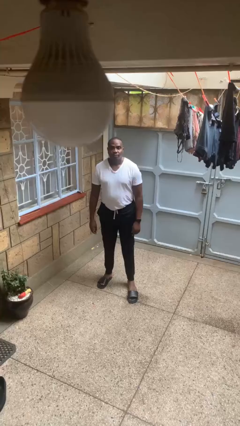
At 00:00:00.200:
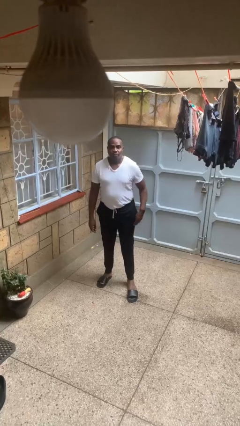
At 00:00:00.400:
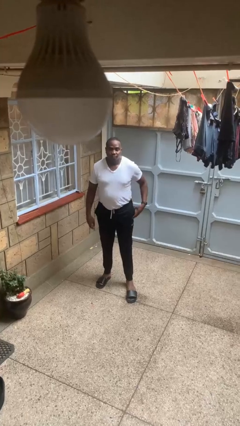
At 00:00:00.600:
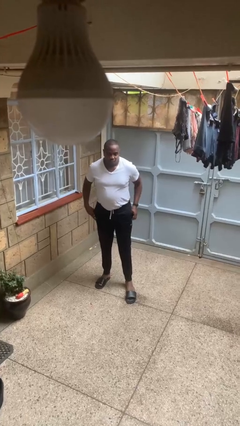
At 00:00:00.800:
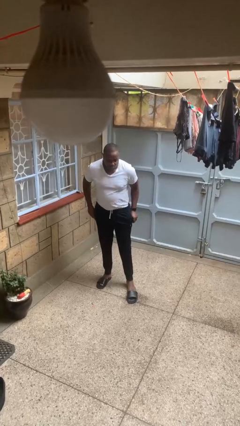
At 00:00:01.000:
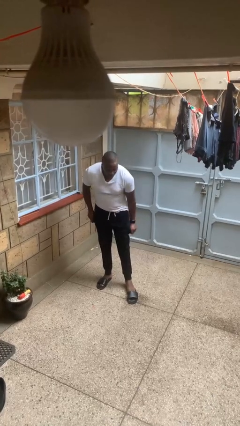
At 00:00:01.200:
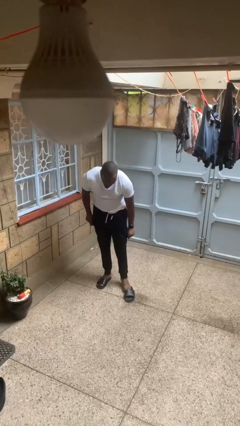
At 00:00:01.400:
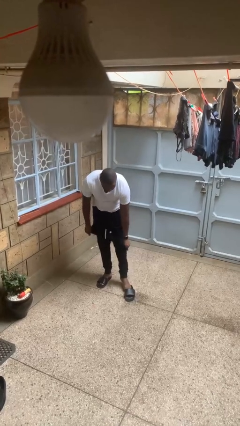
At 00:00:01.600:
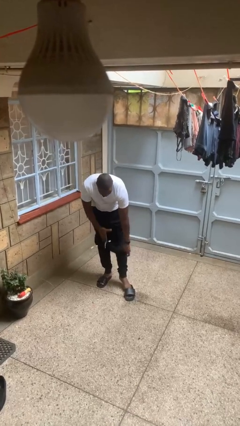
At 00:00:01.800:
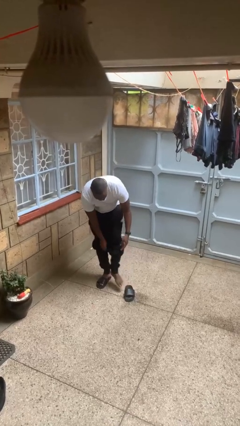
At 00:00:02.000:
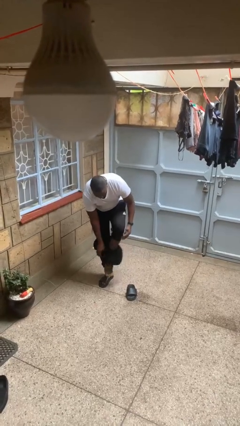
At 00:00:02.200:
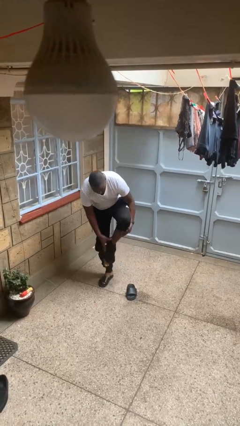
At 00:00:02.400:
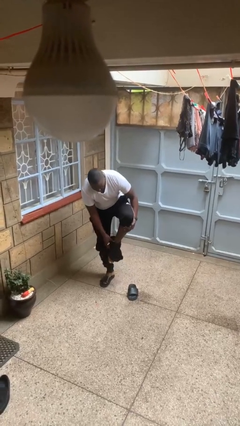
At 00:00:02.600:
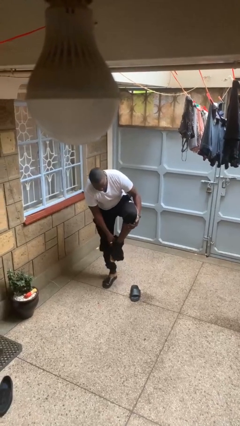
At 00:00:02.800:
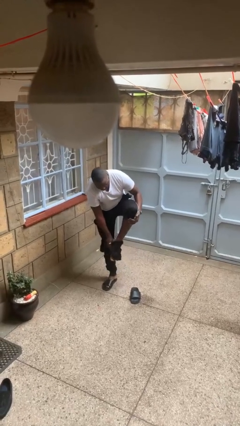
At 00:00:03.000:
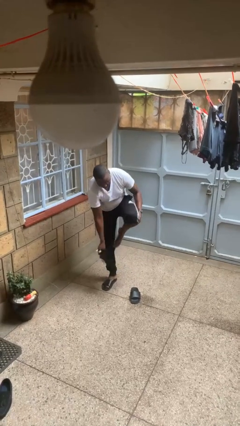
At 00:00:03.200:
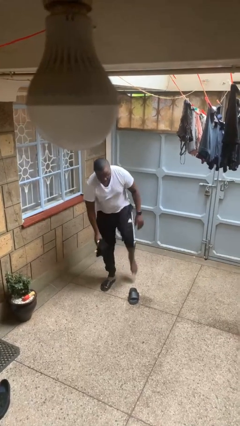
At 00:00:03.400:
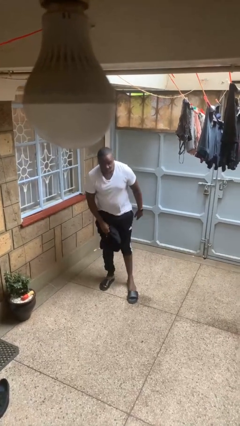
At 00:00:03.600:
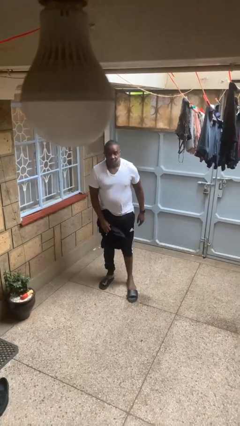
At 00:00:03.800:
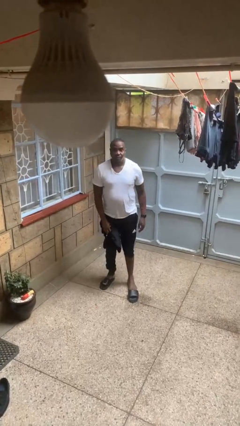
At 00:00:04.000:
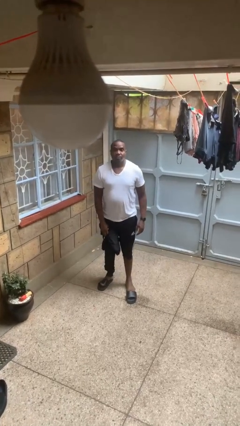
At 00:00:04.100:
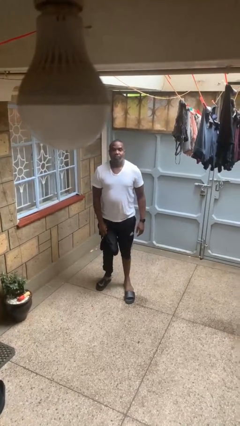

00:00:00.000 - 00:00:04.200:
person takes off pants

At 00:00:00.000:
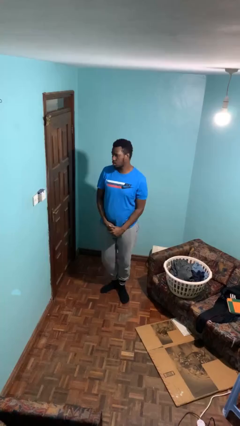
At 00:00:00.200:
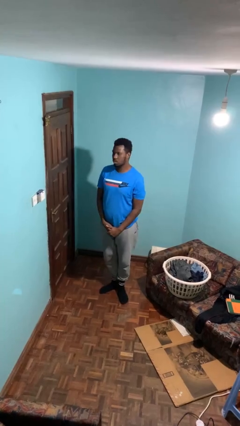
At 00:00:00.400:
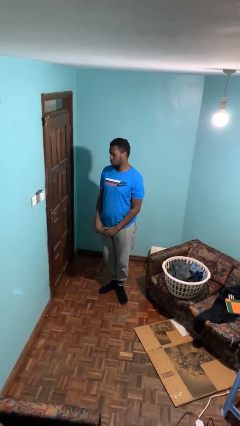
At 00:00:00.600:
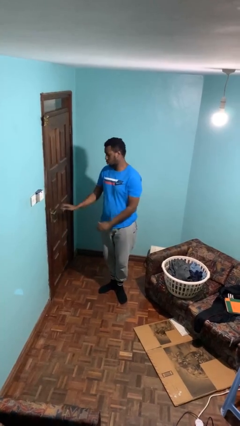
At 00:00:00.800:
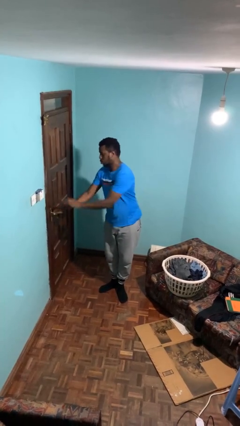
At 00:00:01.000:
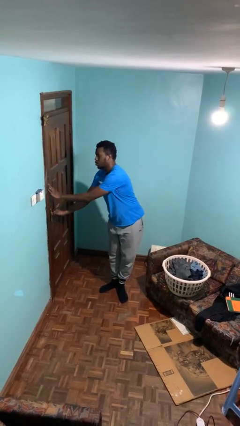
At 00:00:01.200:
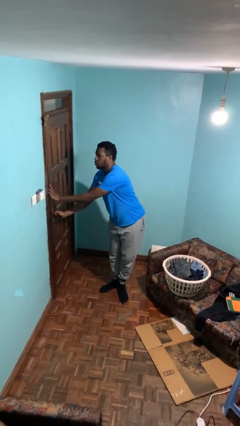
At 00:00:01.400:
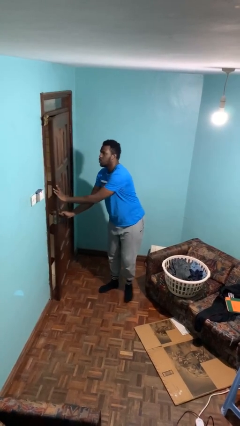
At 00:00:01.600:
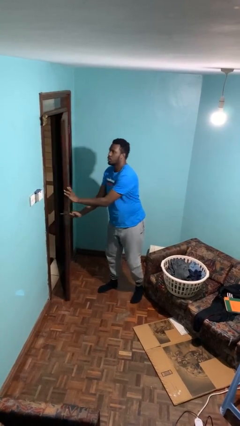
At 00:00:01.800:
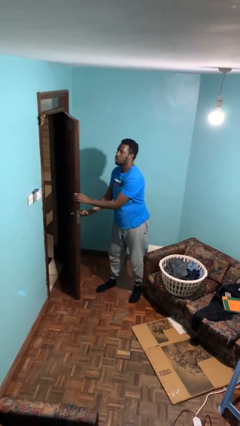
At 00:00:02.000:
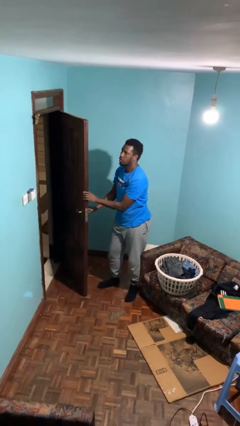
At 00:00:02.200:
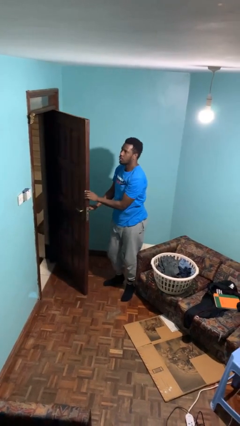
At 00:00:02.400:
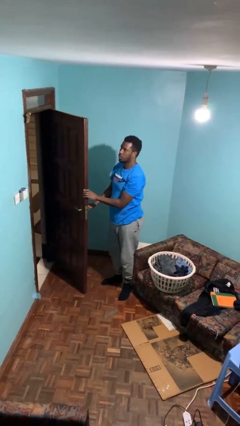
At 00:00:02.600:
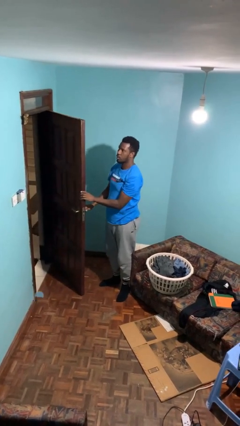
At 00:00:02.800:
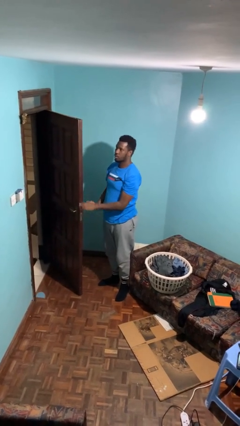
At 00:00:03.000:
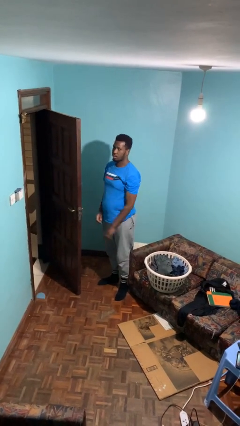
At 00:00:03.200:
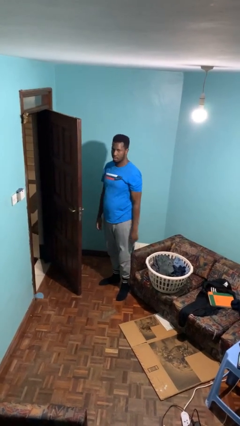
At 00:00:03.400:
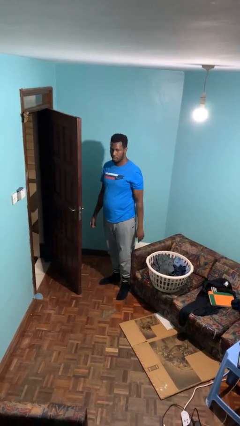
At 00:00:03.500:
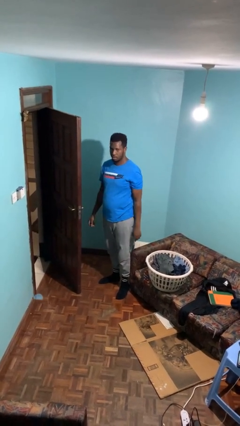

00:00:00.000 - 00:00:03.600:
person opens facility door

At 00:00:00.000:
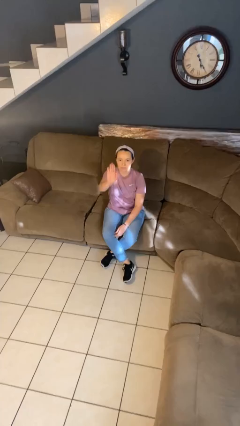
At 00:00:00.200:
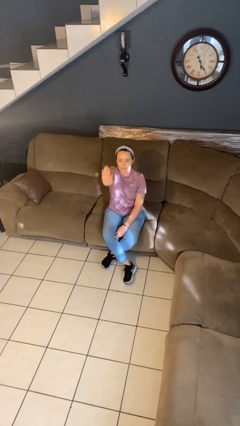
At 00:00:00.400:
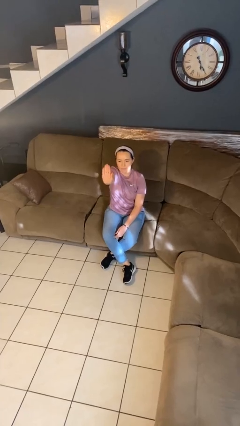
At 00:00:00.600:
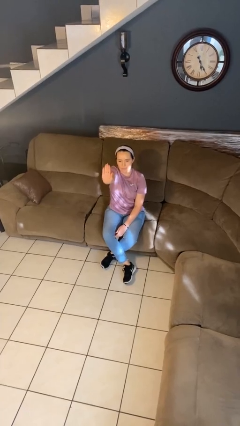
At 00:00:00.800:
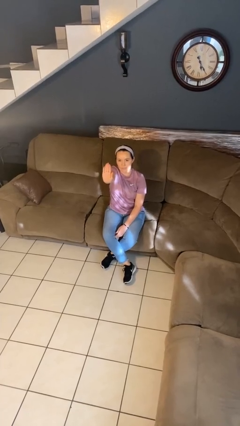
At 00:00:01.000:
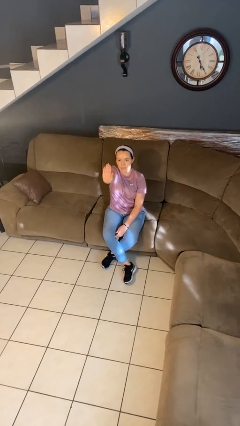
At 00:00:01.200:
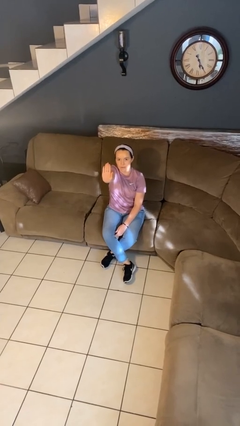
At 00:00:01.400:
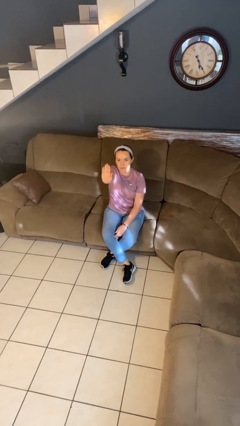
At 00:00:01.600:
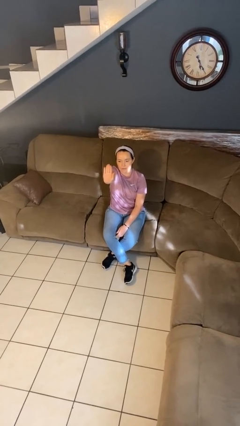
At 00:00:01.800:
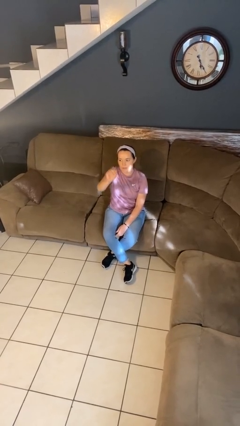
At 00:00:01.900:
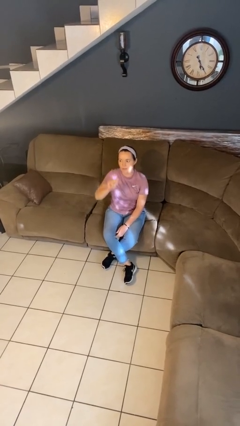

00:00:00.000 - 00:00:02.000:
person gestures stop

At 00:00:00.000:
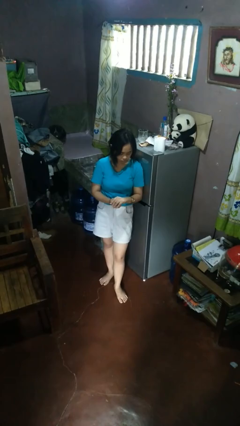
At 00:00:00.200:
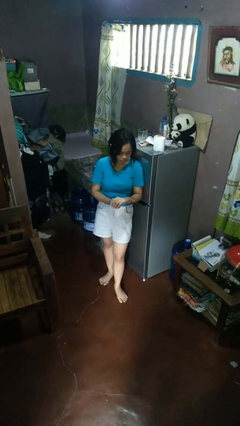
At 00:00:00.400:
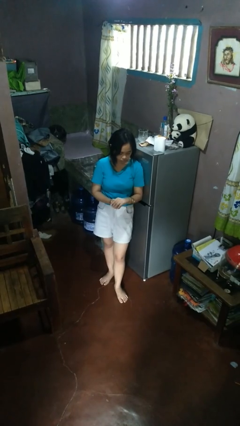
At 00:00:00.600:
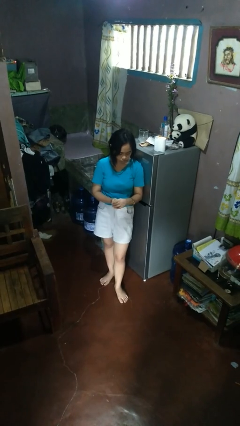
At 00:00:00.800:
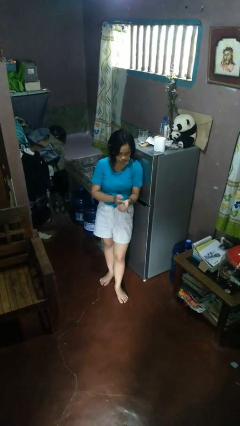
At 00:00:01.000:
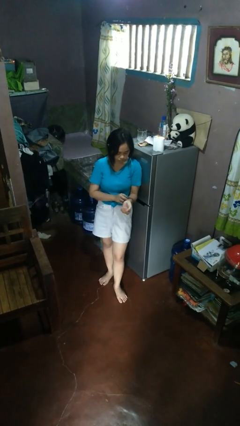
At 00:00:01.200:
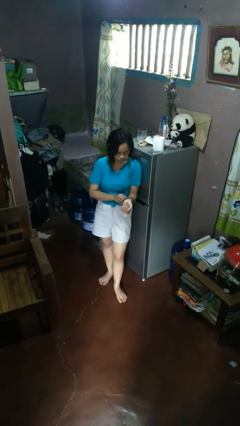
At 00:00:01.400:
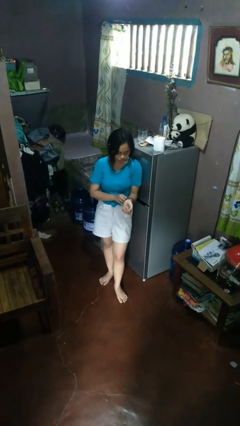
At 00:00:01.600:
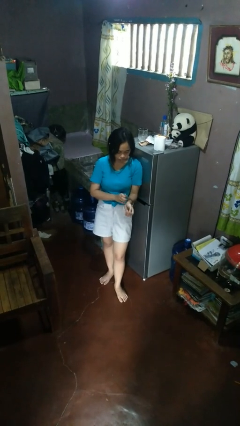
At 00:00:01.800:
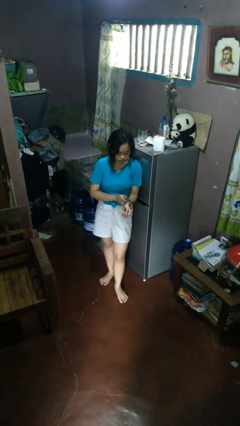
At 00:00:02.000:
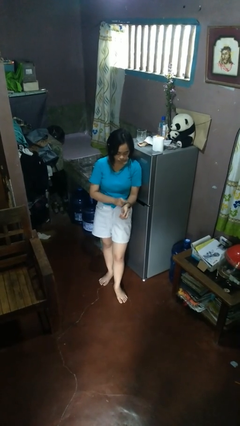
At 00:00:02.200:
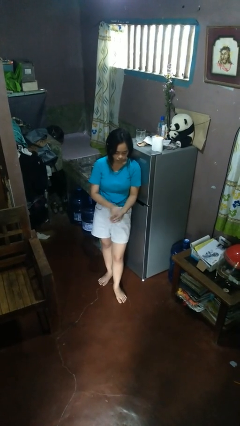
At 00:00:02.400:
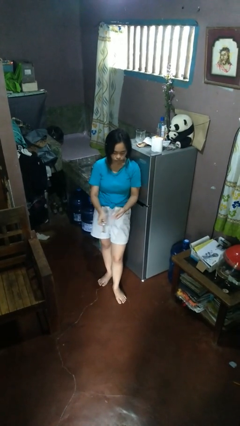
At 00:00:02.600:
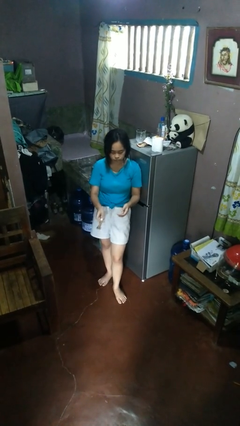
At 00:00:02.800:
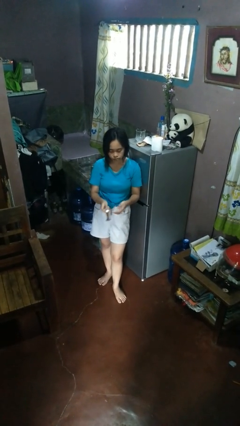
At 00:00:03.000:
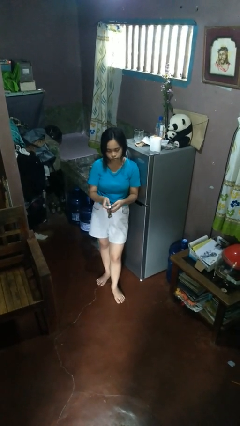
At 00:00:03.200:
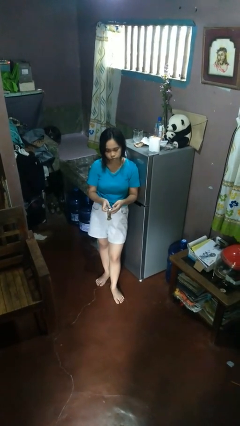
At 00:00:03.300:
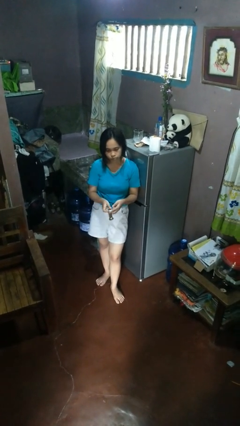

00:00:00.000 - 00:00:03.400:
person takes off wristwatch

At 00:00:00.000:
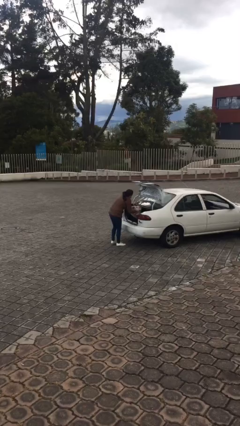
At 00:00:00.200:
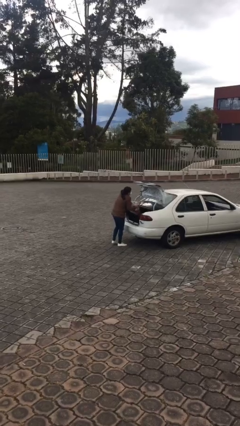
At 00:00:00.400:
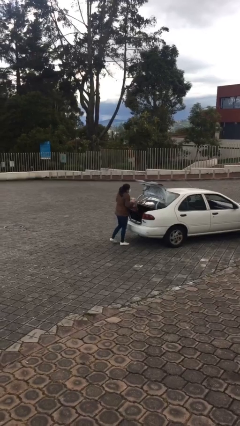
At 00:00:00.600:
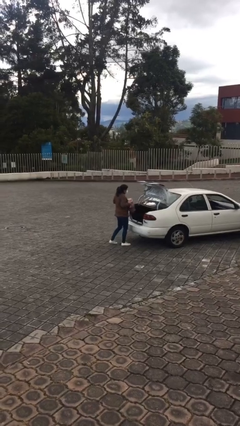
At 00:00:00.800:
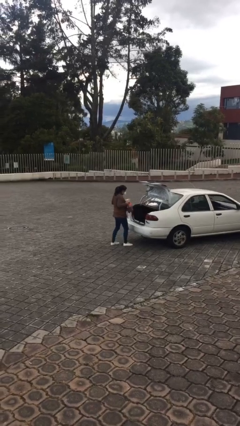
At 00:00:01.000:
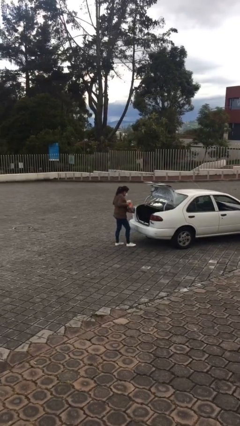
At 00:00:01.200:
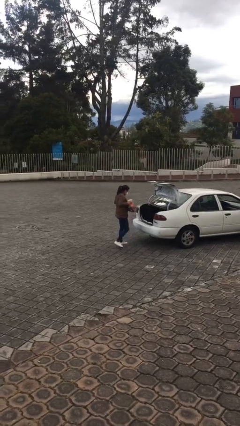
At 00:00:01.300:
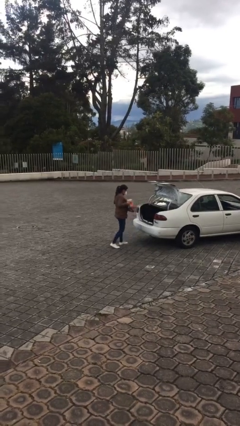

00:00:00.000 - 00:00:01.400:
person unloads car

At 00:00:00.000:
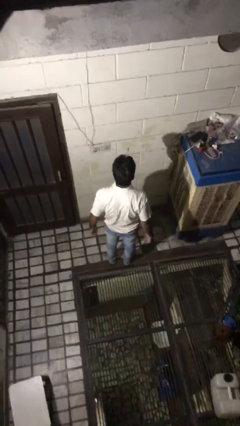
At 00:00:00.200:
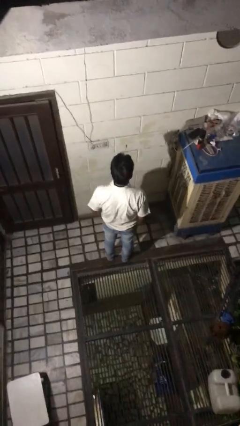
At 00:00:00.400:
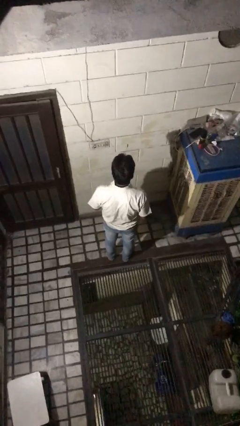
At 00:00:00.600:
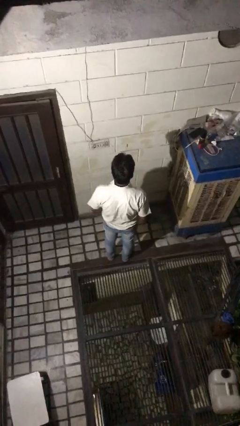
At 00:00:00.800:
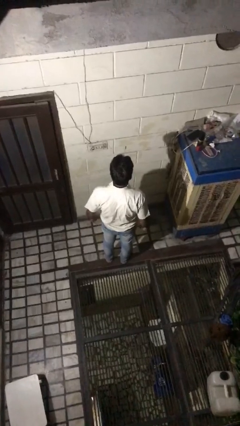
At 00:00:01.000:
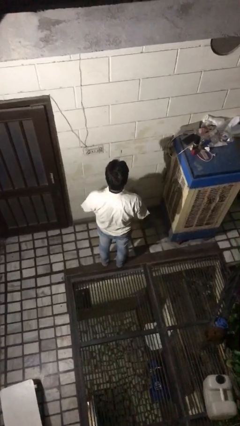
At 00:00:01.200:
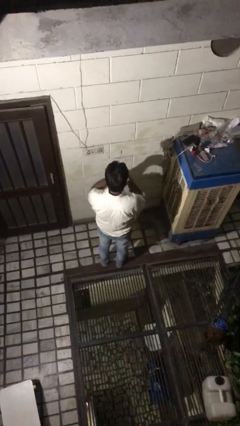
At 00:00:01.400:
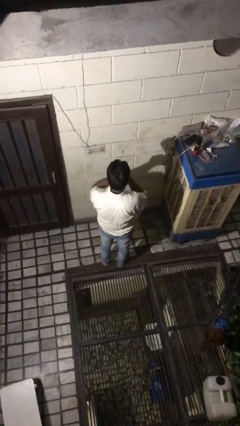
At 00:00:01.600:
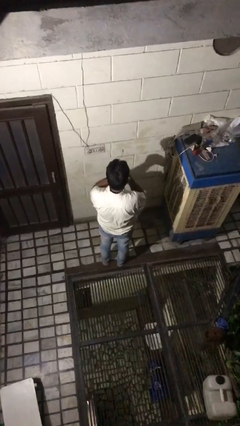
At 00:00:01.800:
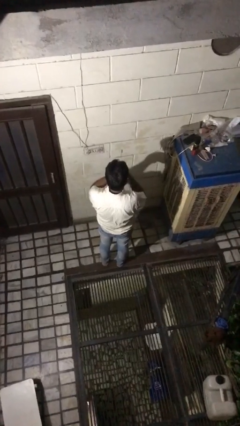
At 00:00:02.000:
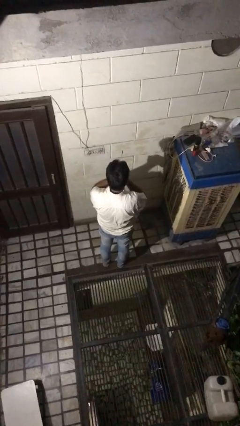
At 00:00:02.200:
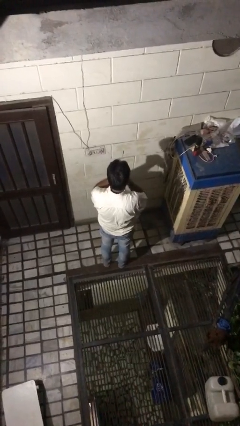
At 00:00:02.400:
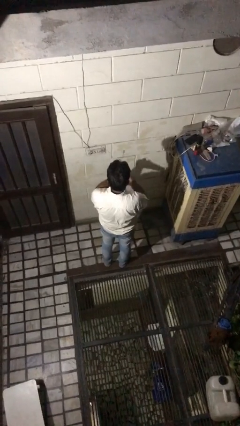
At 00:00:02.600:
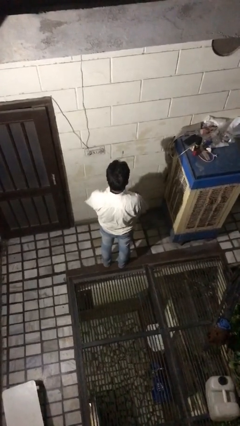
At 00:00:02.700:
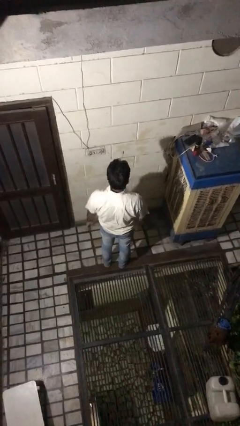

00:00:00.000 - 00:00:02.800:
person snaps fingers
